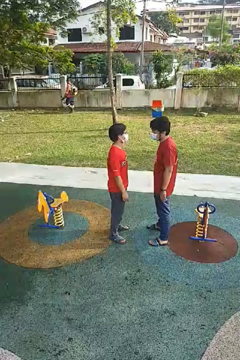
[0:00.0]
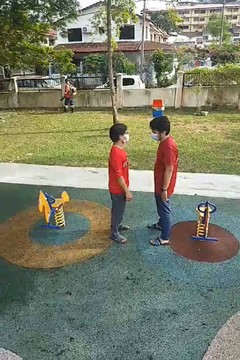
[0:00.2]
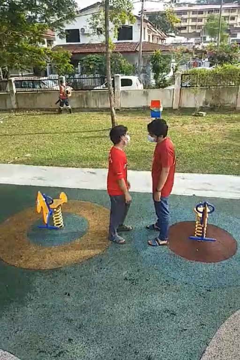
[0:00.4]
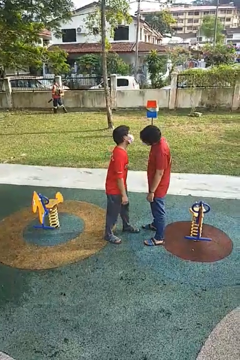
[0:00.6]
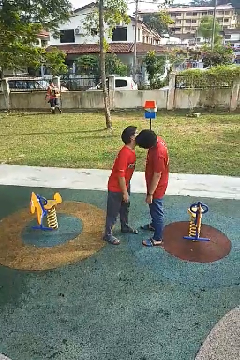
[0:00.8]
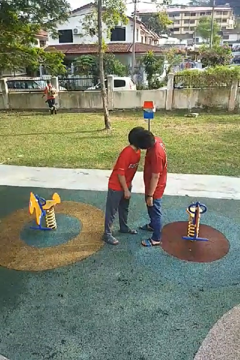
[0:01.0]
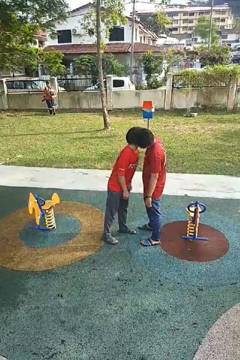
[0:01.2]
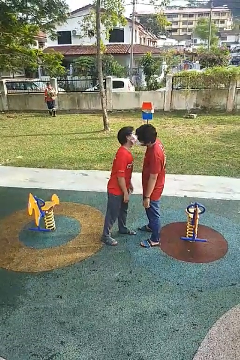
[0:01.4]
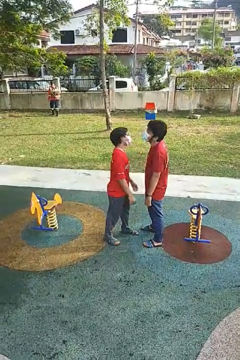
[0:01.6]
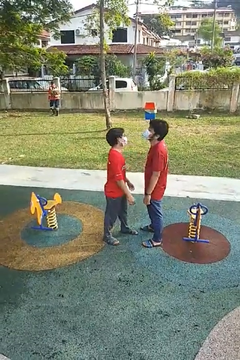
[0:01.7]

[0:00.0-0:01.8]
person kisses cheek of person

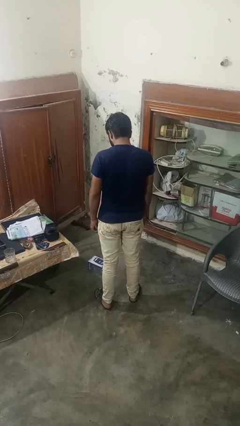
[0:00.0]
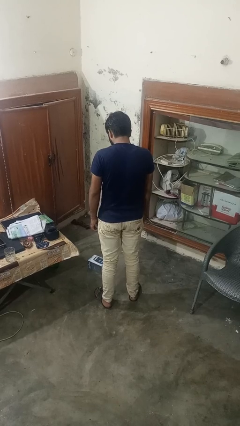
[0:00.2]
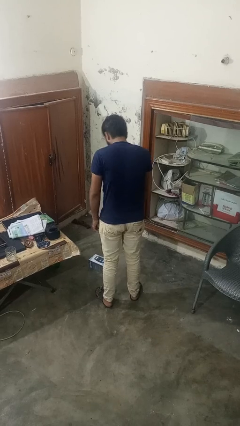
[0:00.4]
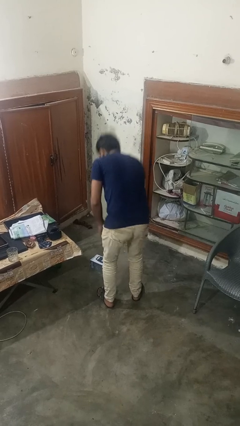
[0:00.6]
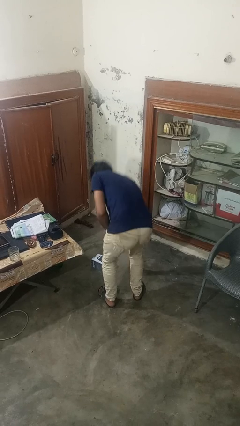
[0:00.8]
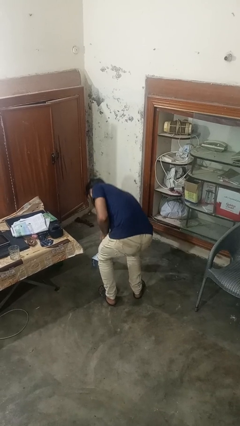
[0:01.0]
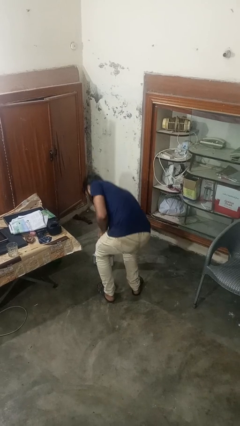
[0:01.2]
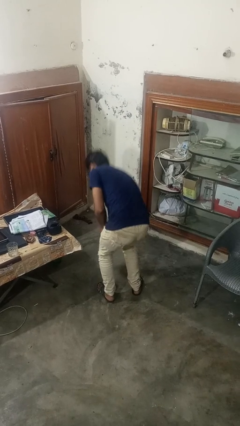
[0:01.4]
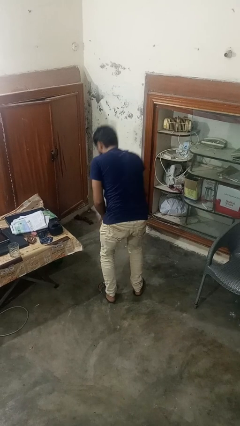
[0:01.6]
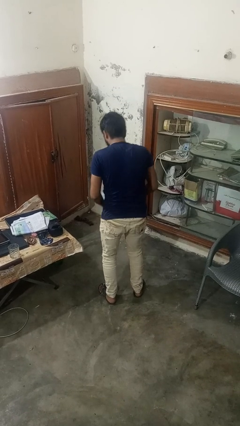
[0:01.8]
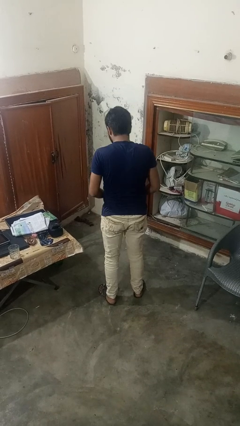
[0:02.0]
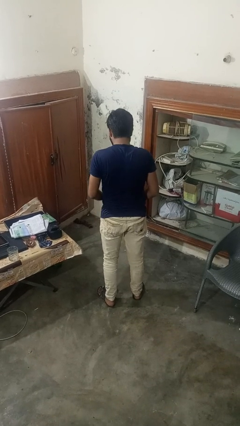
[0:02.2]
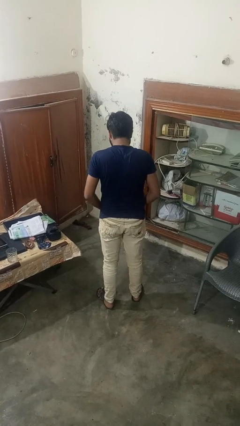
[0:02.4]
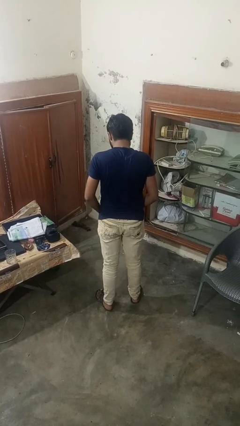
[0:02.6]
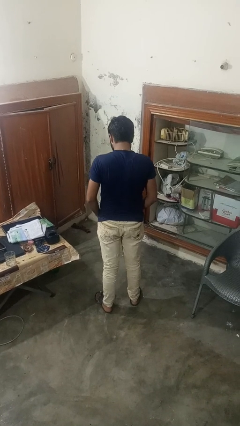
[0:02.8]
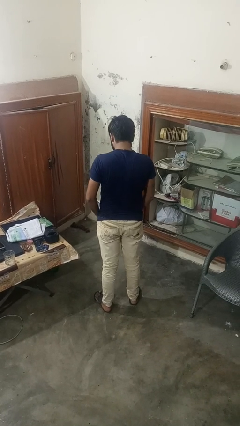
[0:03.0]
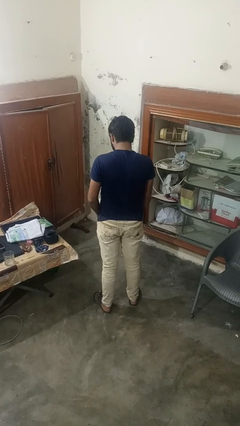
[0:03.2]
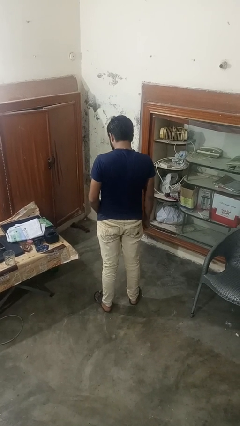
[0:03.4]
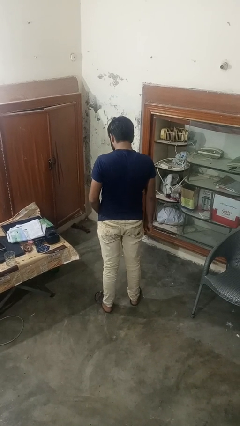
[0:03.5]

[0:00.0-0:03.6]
person picks up object from floor

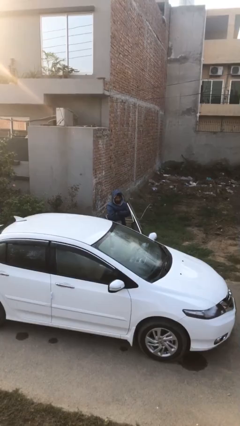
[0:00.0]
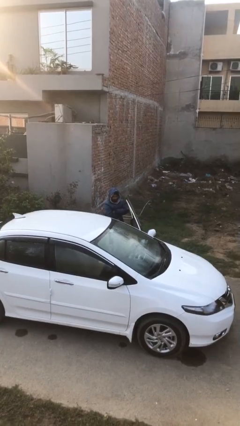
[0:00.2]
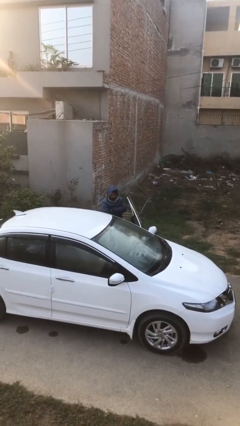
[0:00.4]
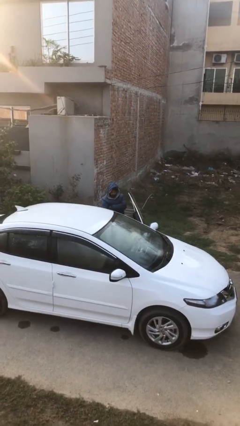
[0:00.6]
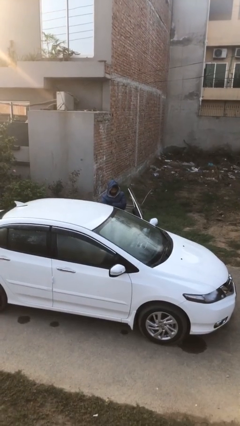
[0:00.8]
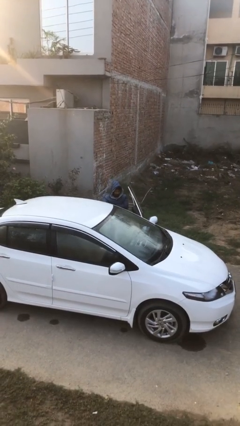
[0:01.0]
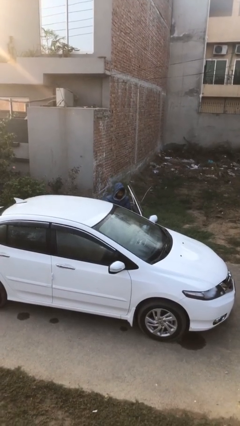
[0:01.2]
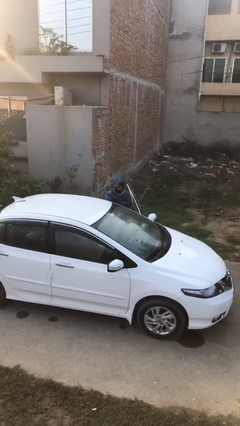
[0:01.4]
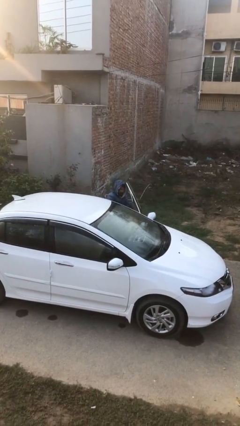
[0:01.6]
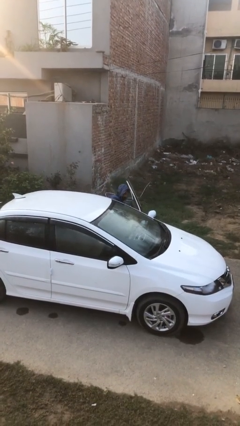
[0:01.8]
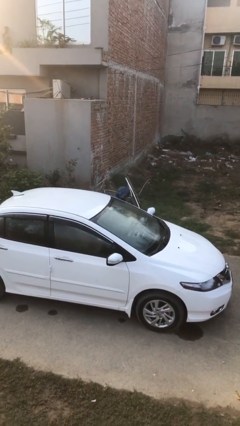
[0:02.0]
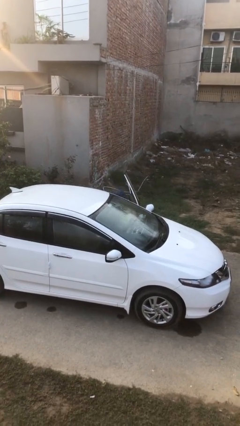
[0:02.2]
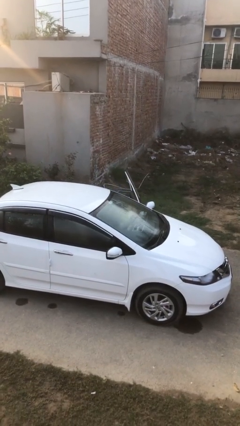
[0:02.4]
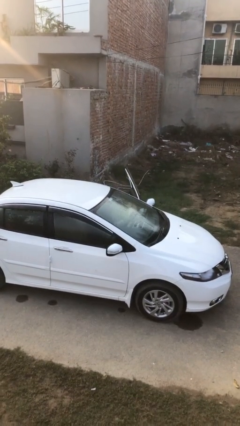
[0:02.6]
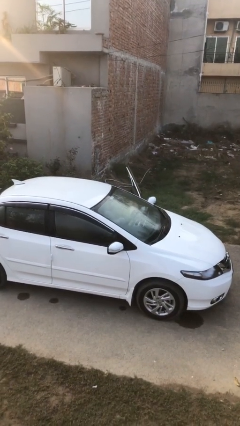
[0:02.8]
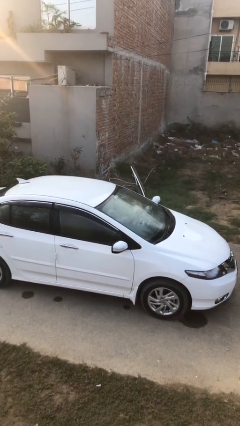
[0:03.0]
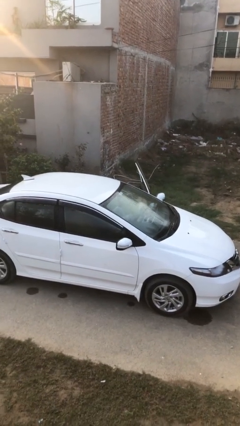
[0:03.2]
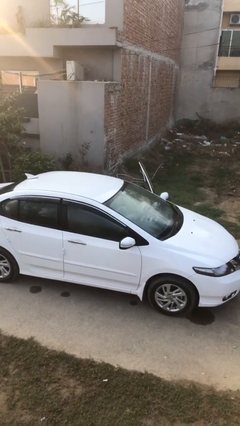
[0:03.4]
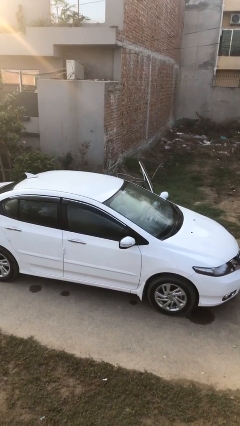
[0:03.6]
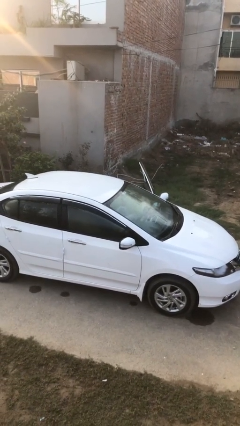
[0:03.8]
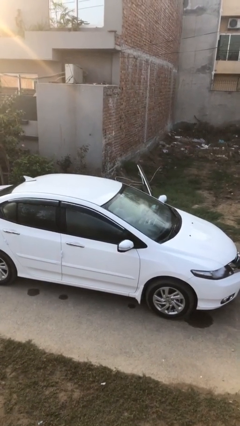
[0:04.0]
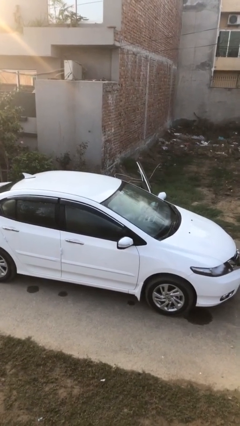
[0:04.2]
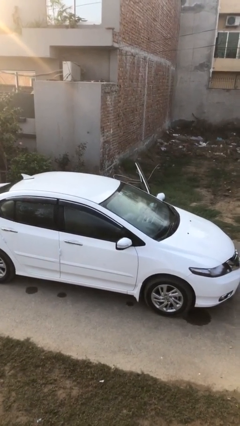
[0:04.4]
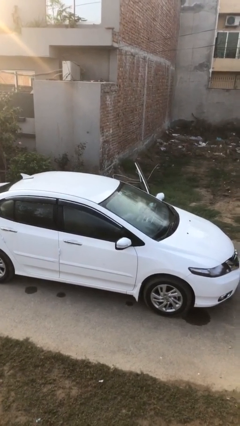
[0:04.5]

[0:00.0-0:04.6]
person enters car

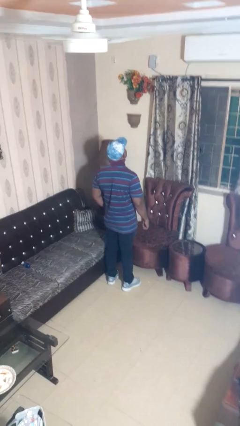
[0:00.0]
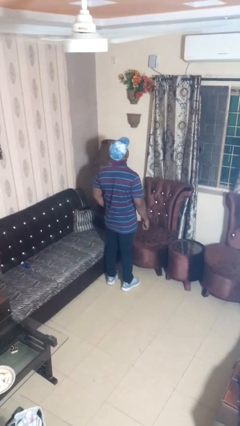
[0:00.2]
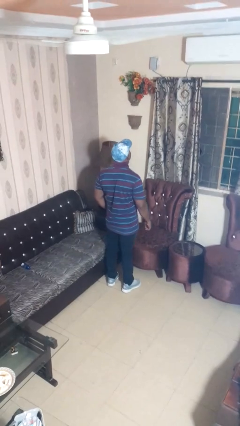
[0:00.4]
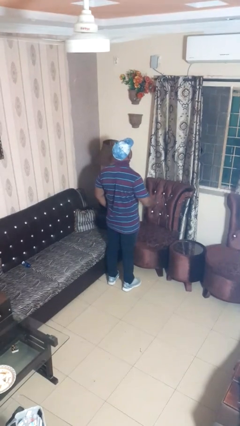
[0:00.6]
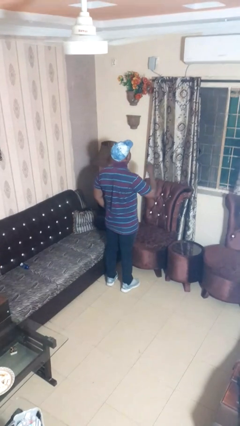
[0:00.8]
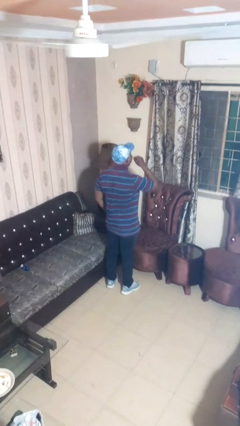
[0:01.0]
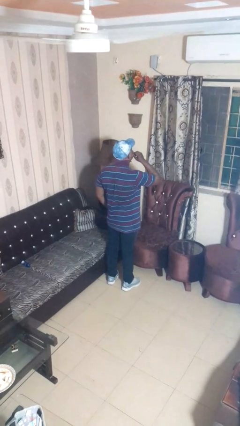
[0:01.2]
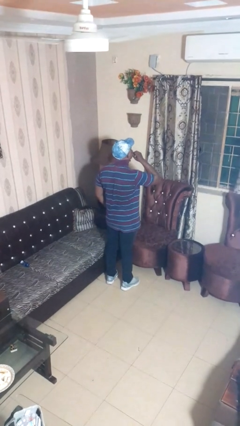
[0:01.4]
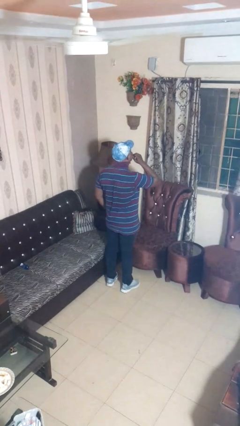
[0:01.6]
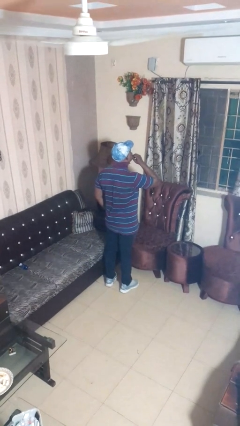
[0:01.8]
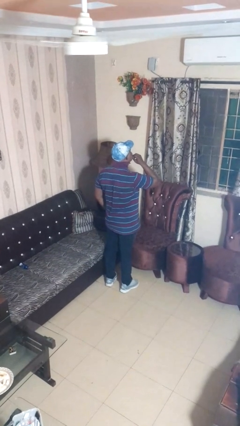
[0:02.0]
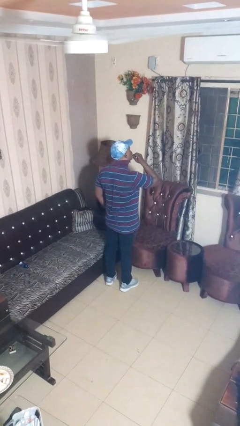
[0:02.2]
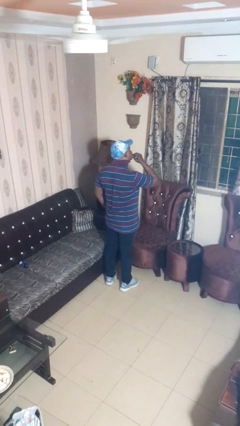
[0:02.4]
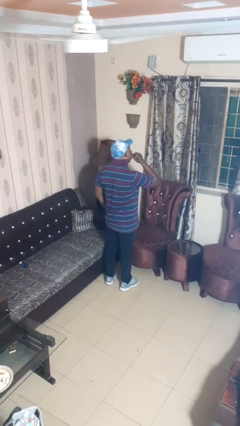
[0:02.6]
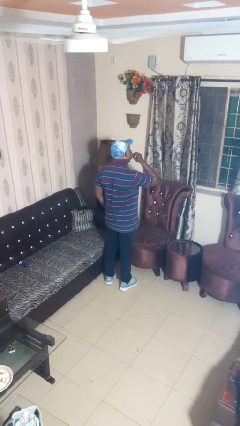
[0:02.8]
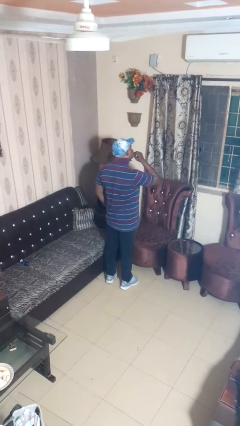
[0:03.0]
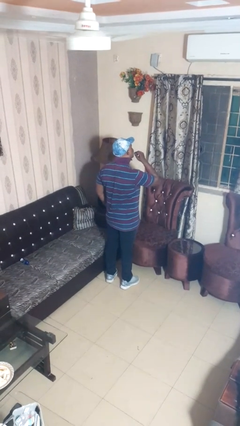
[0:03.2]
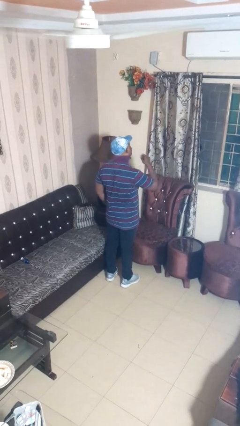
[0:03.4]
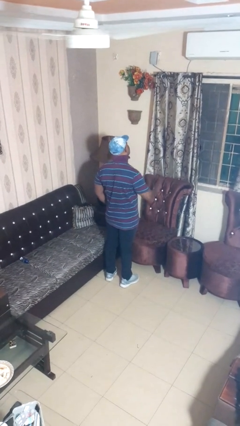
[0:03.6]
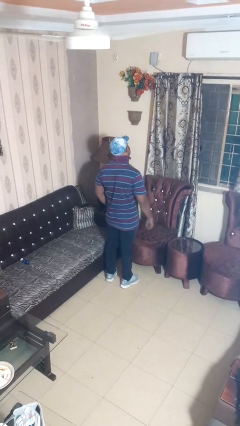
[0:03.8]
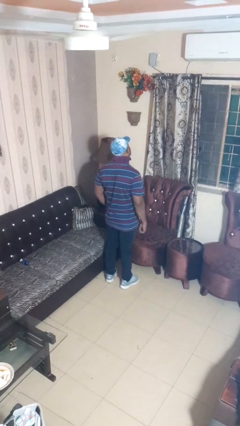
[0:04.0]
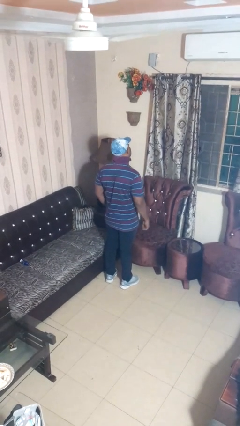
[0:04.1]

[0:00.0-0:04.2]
person flosses

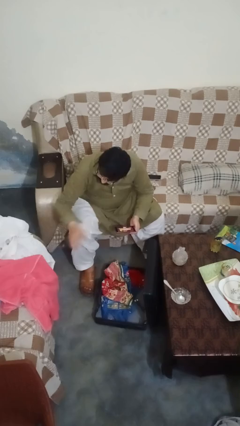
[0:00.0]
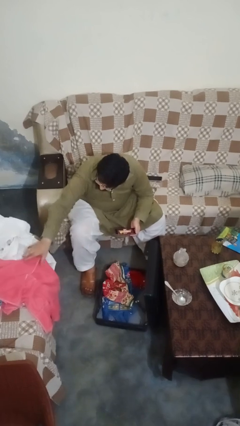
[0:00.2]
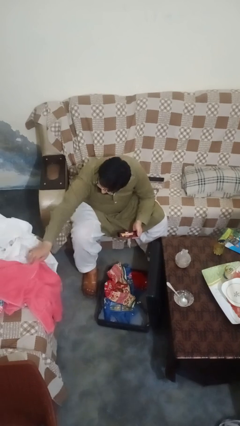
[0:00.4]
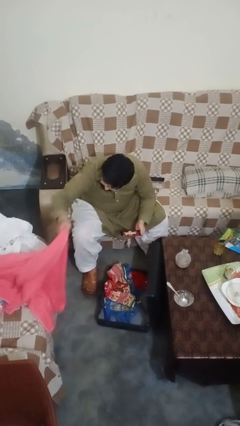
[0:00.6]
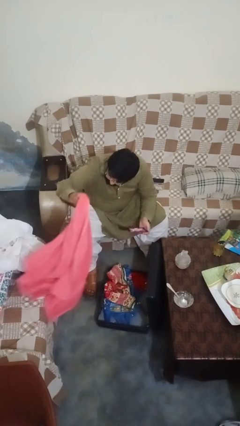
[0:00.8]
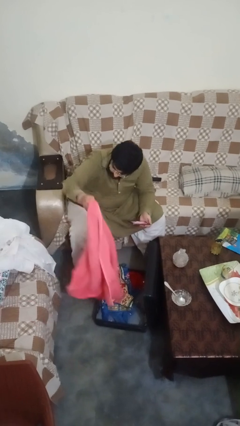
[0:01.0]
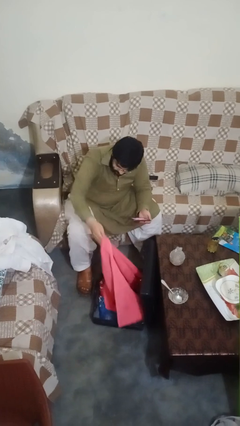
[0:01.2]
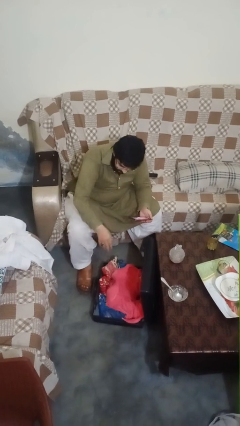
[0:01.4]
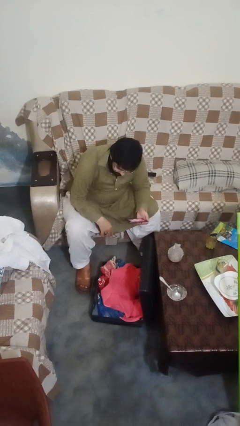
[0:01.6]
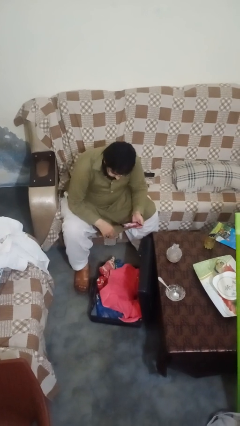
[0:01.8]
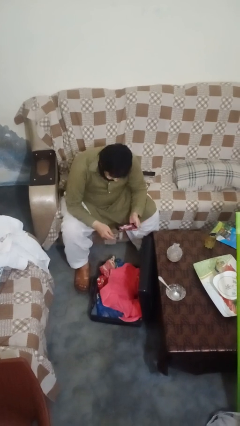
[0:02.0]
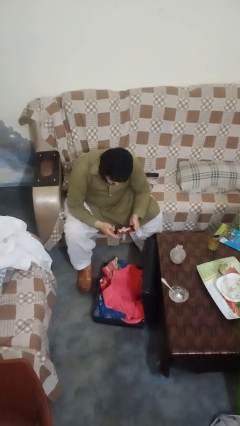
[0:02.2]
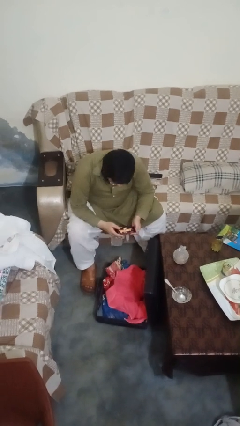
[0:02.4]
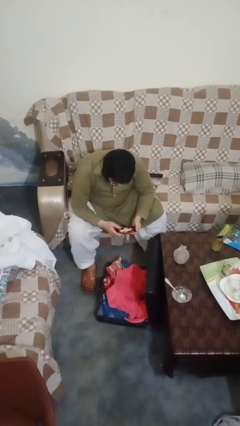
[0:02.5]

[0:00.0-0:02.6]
person loads clothes into suitcase

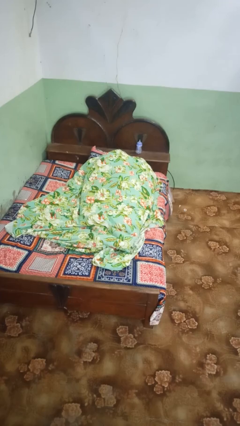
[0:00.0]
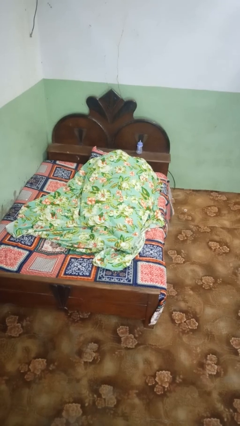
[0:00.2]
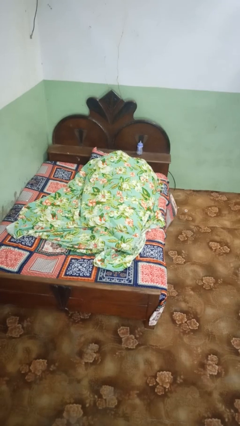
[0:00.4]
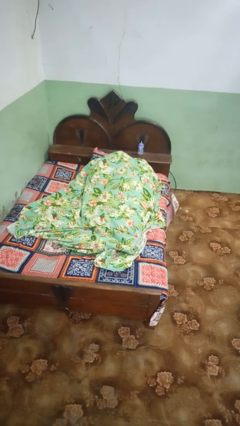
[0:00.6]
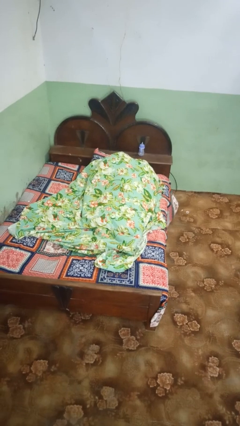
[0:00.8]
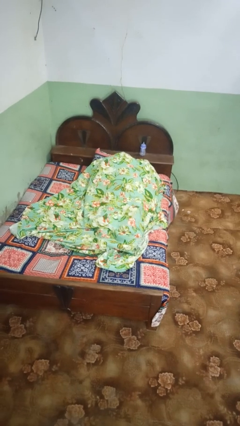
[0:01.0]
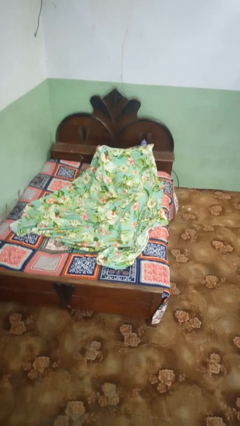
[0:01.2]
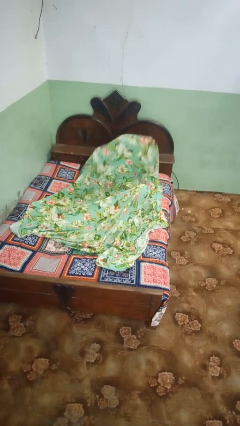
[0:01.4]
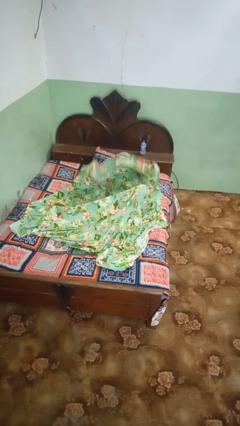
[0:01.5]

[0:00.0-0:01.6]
person covers with bedsheets
